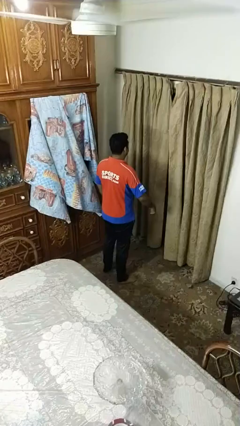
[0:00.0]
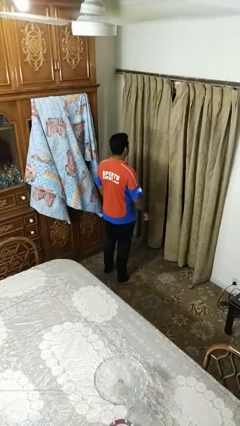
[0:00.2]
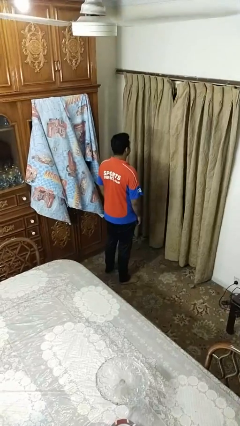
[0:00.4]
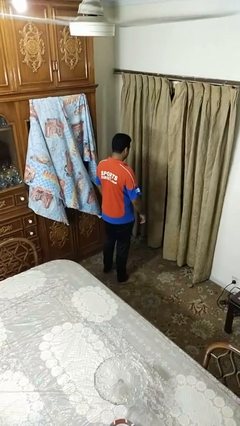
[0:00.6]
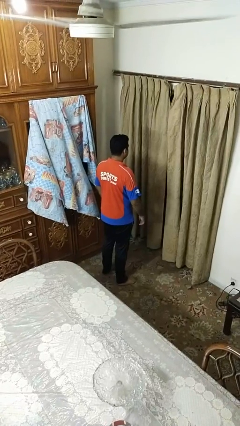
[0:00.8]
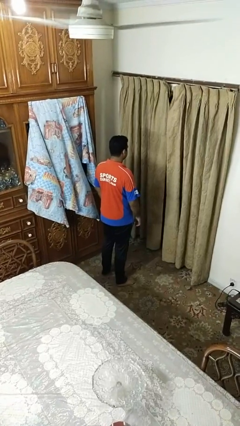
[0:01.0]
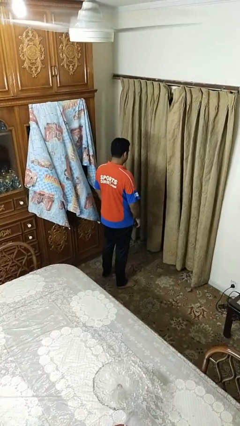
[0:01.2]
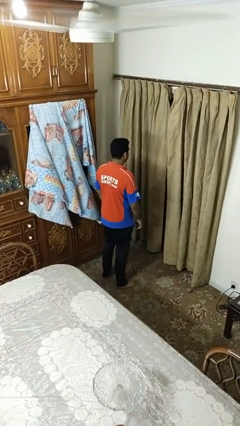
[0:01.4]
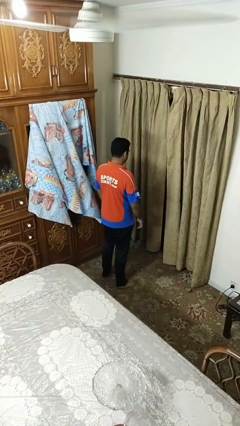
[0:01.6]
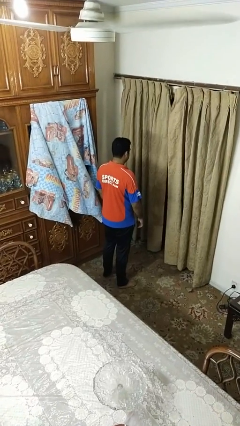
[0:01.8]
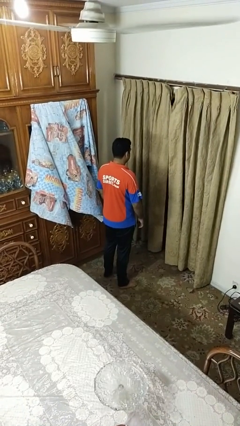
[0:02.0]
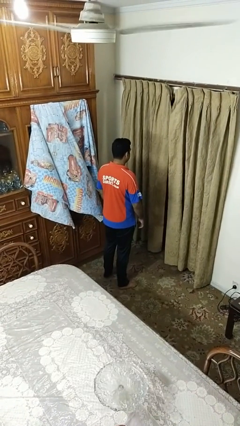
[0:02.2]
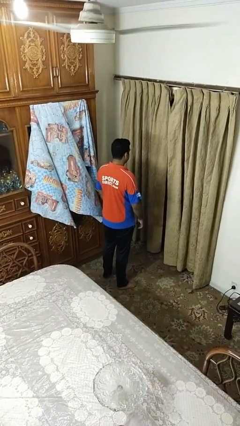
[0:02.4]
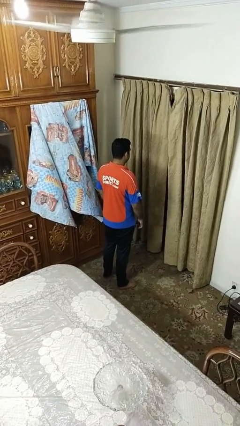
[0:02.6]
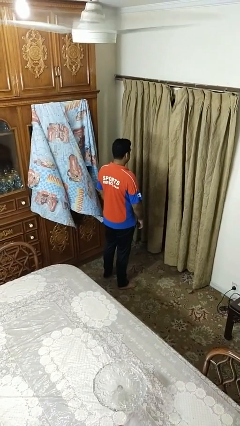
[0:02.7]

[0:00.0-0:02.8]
person nods head

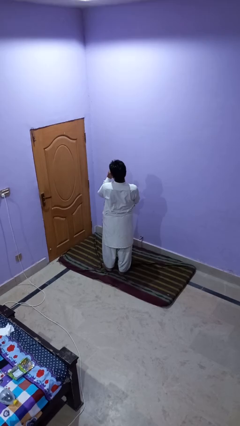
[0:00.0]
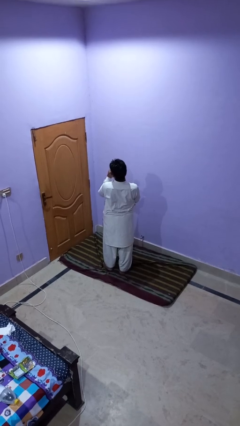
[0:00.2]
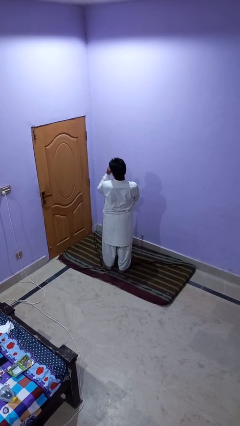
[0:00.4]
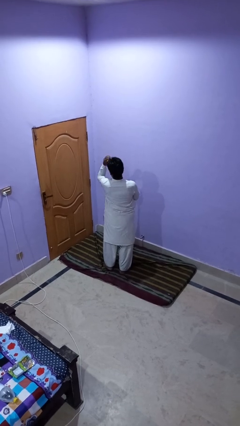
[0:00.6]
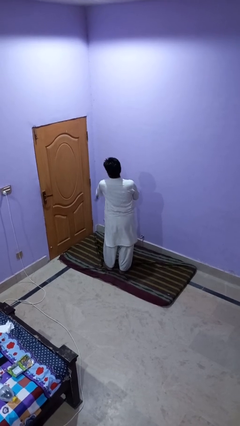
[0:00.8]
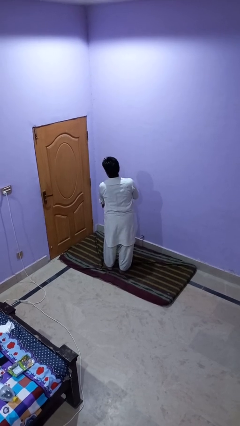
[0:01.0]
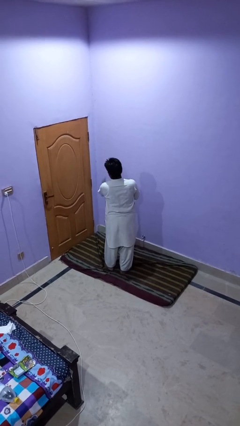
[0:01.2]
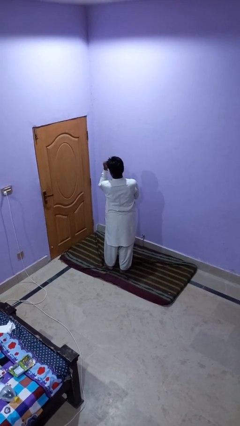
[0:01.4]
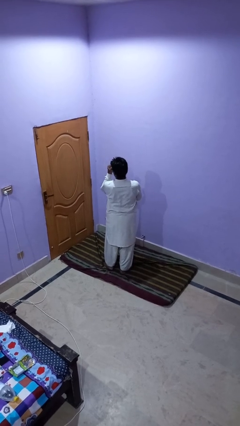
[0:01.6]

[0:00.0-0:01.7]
person karate chop

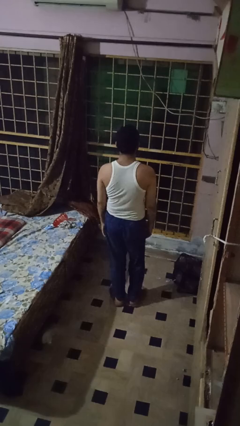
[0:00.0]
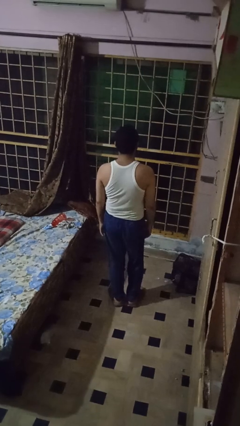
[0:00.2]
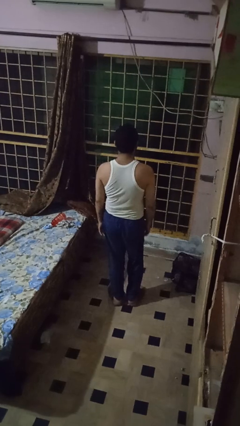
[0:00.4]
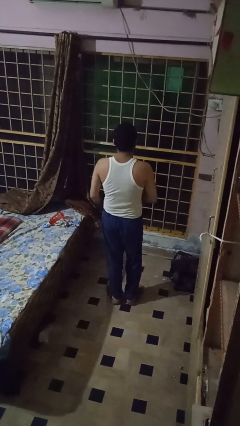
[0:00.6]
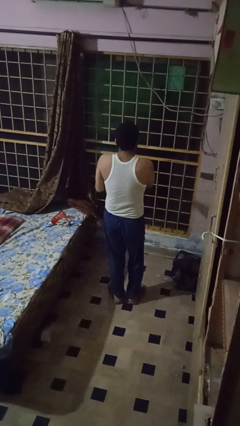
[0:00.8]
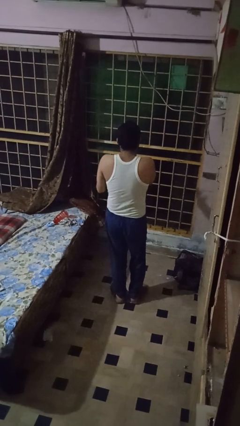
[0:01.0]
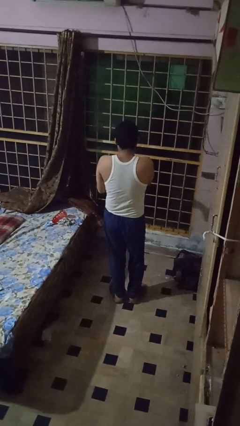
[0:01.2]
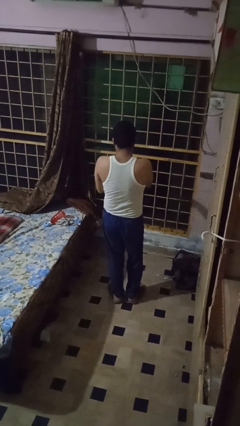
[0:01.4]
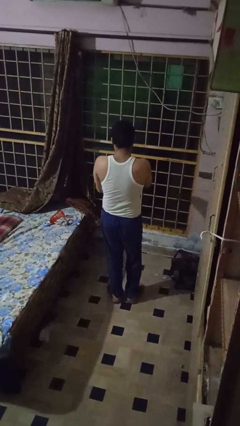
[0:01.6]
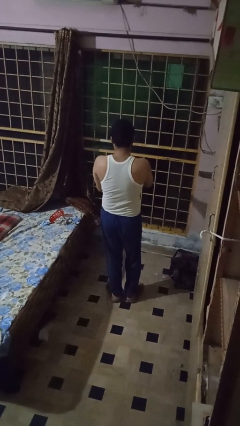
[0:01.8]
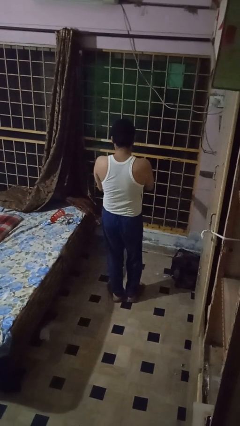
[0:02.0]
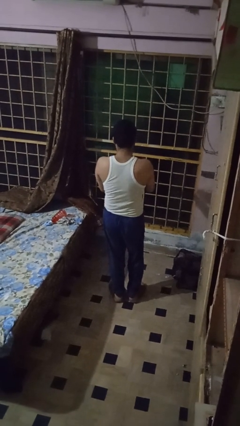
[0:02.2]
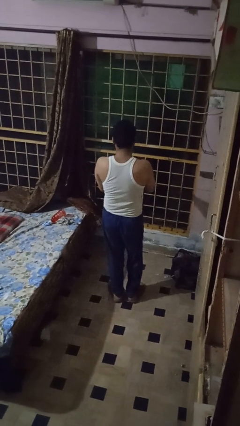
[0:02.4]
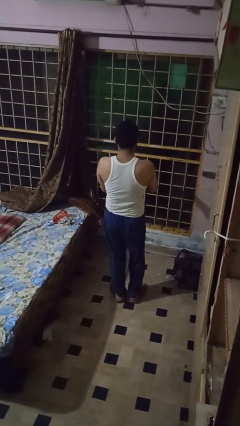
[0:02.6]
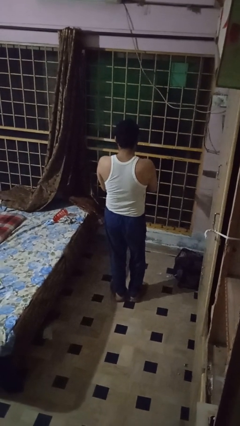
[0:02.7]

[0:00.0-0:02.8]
person swats bug

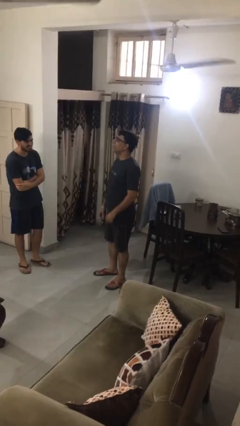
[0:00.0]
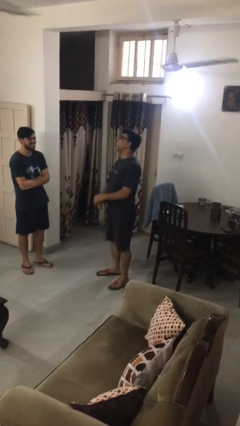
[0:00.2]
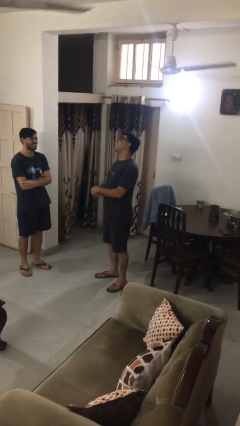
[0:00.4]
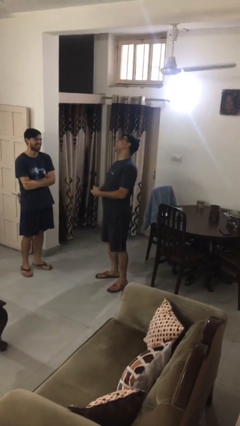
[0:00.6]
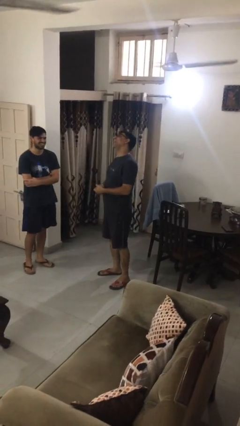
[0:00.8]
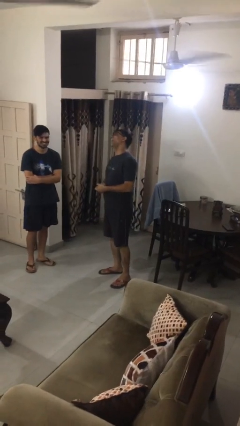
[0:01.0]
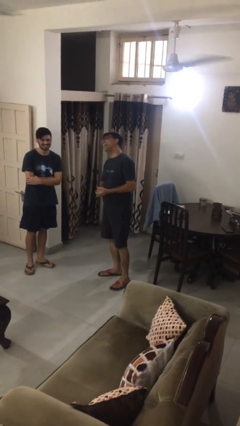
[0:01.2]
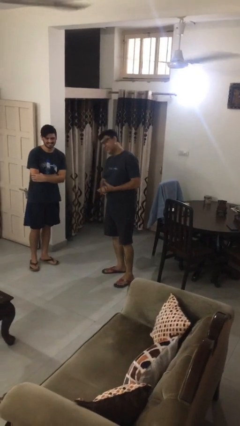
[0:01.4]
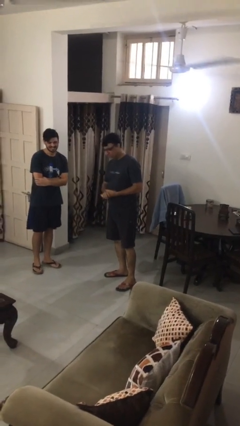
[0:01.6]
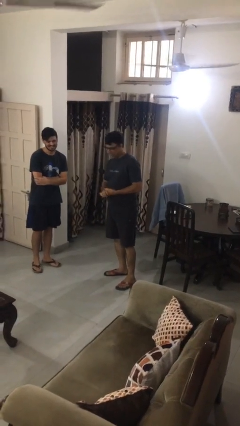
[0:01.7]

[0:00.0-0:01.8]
person laughs with person

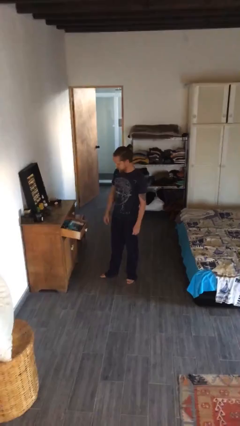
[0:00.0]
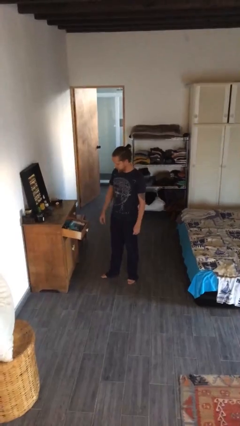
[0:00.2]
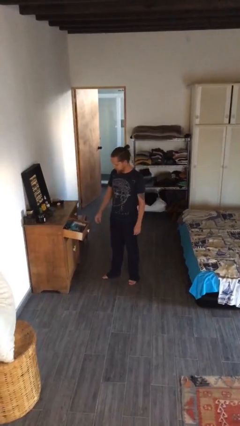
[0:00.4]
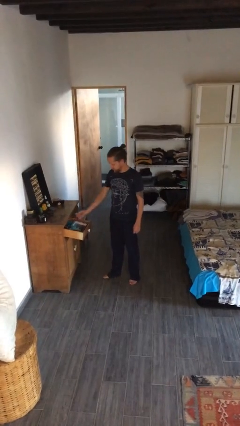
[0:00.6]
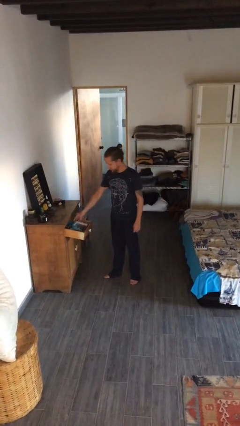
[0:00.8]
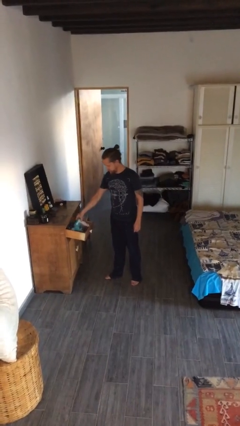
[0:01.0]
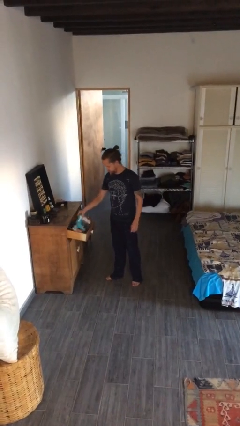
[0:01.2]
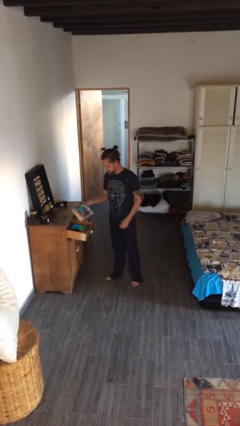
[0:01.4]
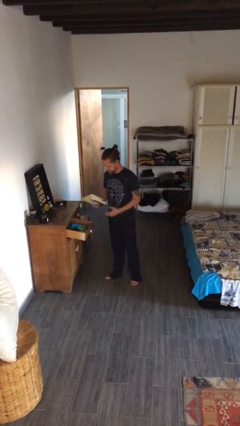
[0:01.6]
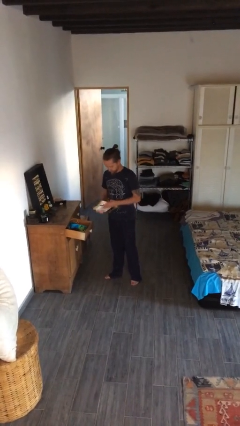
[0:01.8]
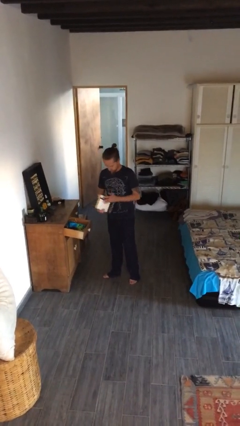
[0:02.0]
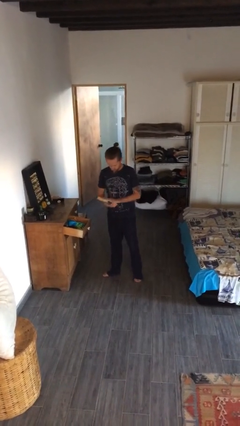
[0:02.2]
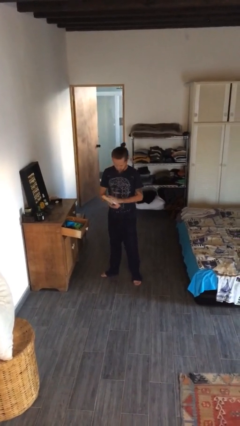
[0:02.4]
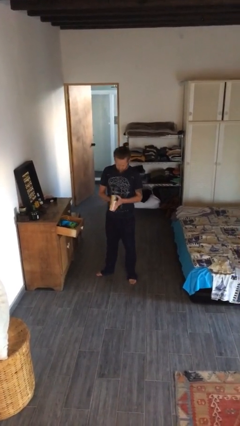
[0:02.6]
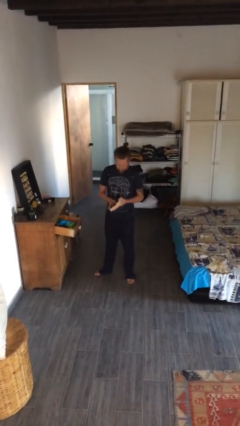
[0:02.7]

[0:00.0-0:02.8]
person picks up object from cabinet

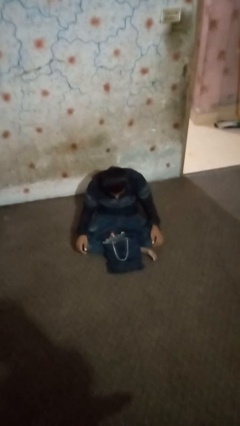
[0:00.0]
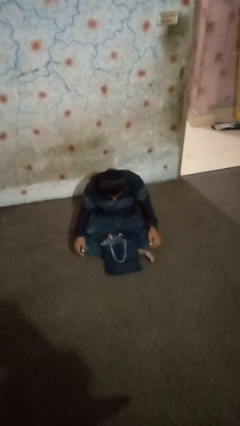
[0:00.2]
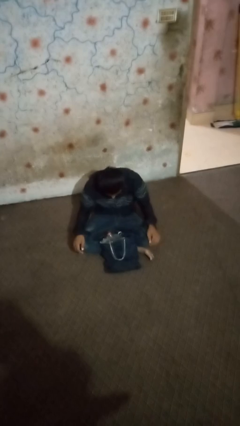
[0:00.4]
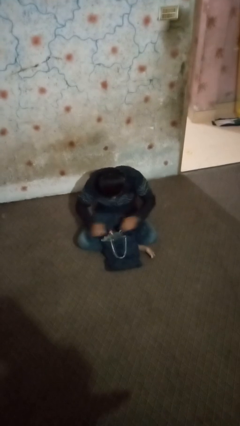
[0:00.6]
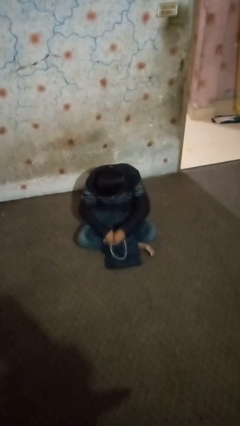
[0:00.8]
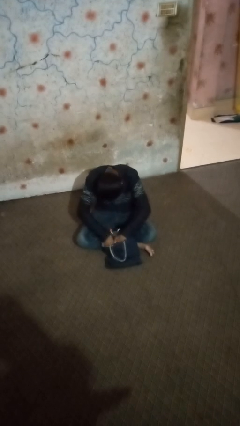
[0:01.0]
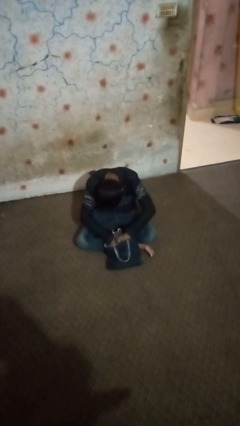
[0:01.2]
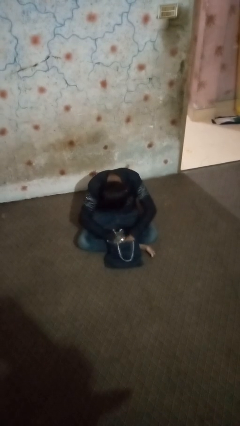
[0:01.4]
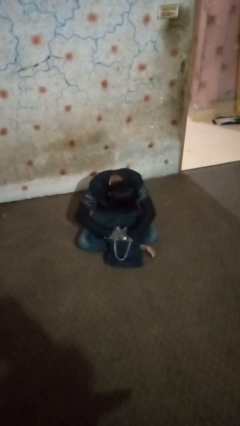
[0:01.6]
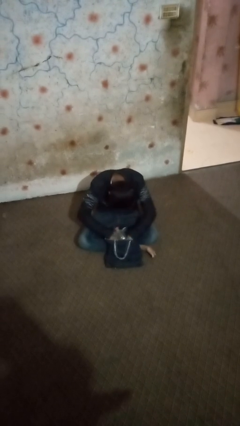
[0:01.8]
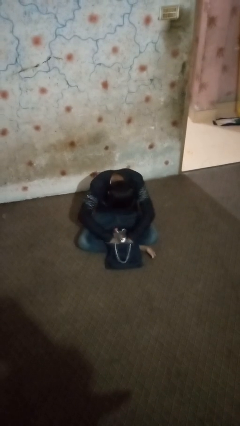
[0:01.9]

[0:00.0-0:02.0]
person searches in bag

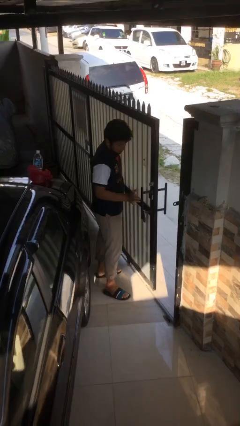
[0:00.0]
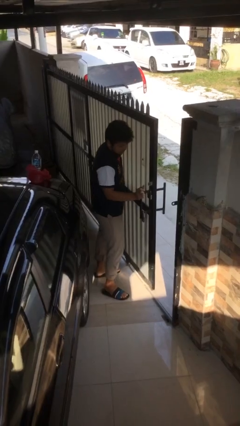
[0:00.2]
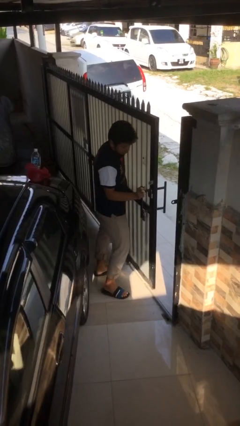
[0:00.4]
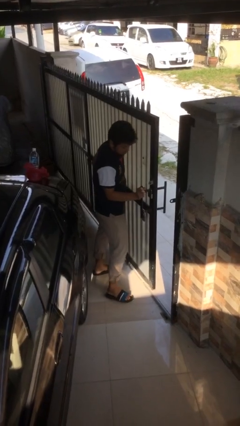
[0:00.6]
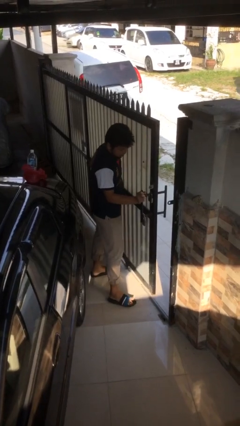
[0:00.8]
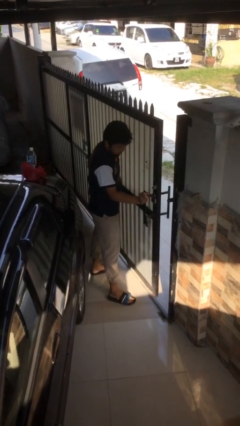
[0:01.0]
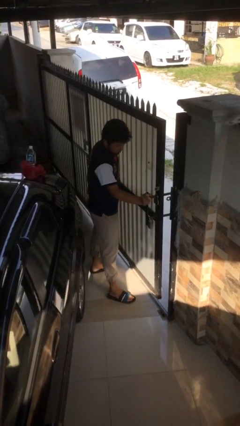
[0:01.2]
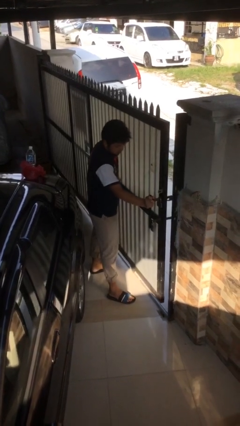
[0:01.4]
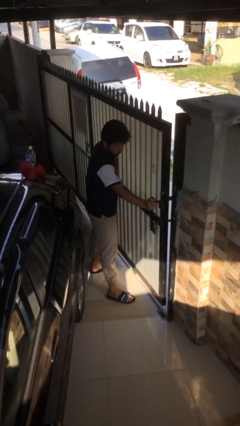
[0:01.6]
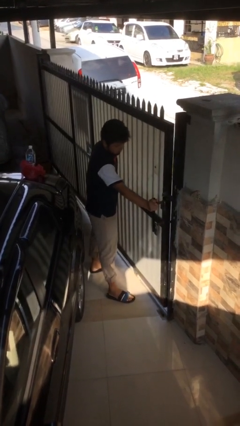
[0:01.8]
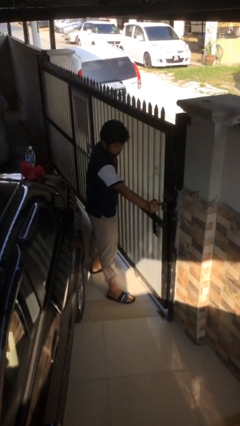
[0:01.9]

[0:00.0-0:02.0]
person closes sliding door

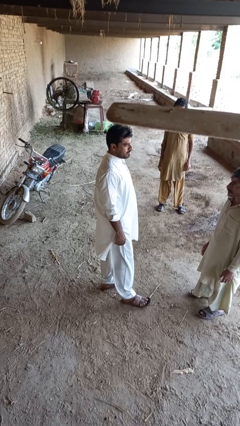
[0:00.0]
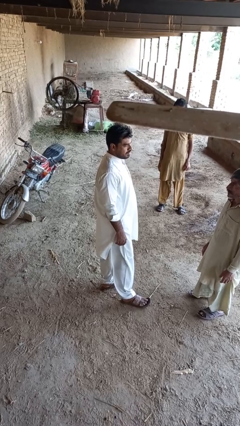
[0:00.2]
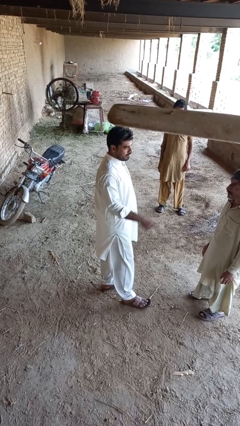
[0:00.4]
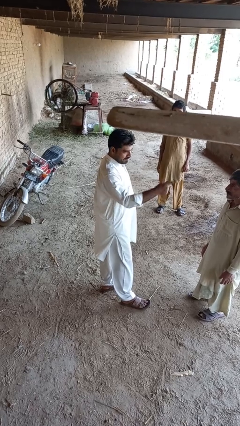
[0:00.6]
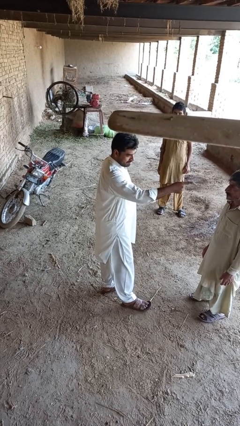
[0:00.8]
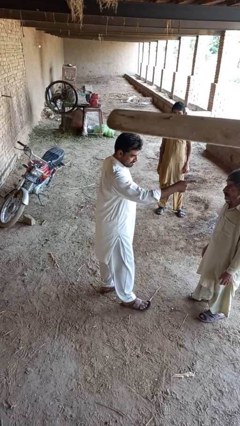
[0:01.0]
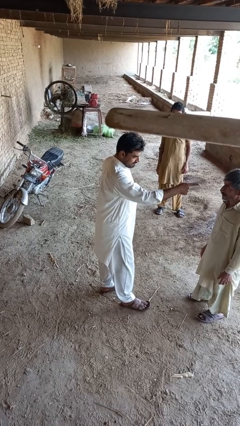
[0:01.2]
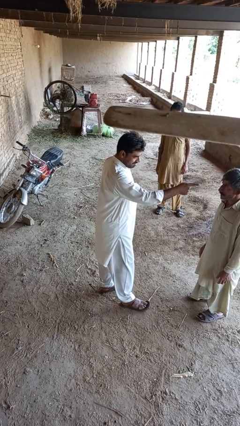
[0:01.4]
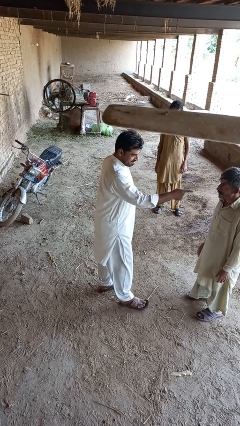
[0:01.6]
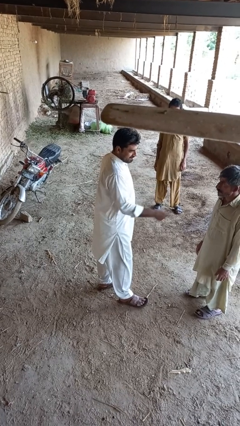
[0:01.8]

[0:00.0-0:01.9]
person points at person
